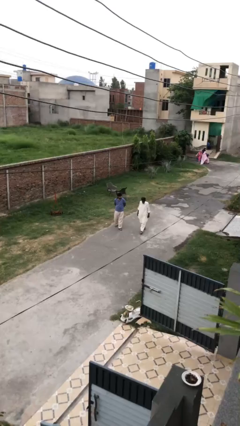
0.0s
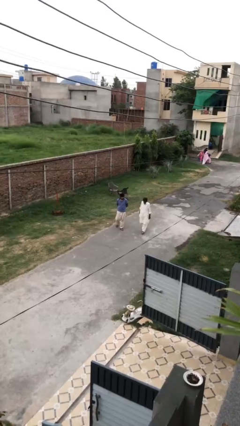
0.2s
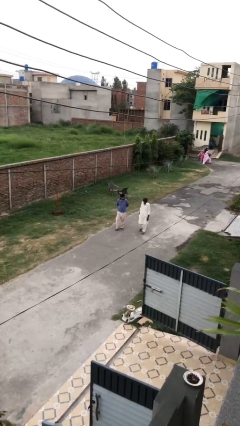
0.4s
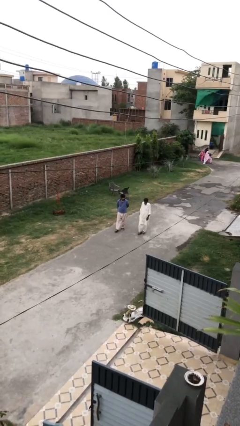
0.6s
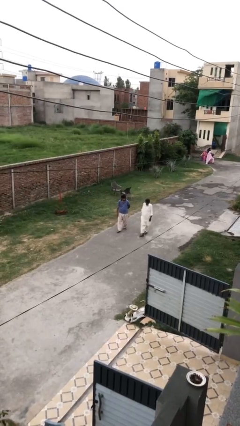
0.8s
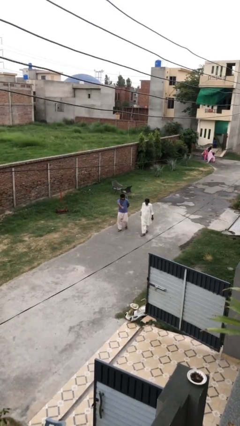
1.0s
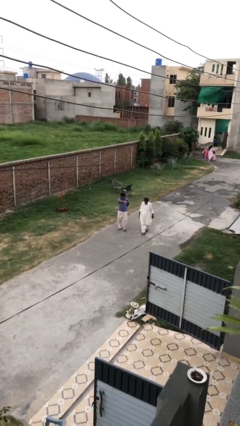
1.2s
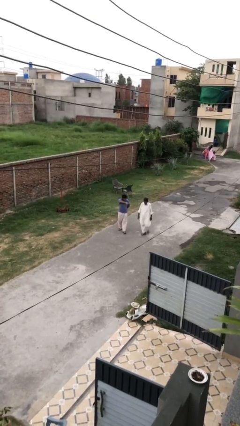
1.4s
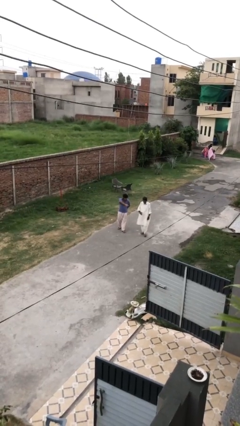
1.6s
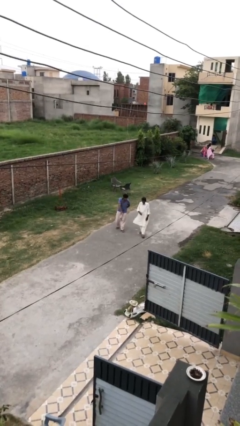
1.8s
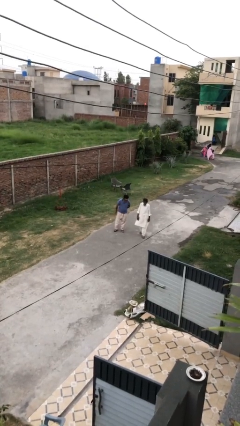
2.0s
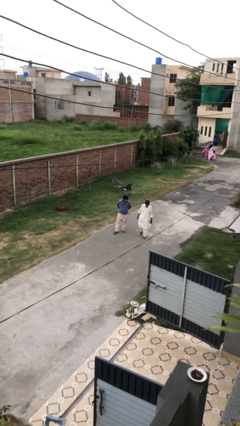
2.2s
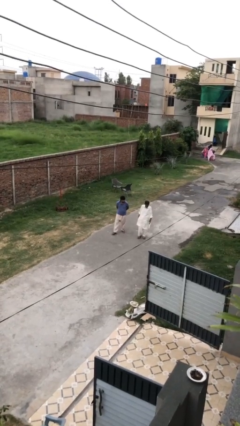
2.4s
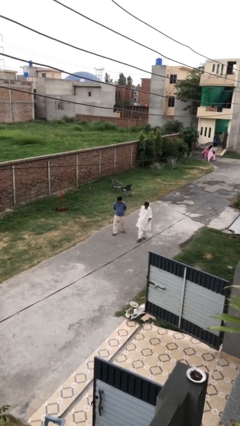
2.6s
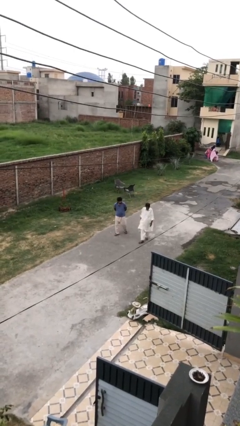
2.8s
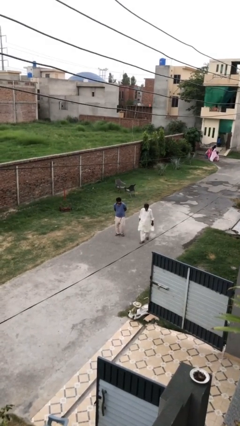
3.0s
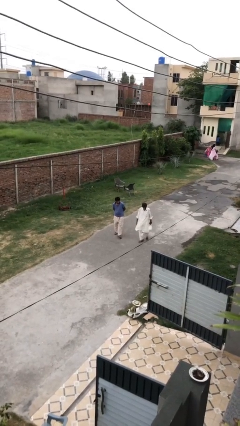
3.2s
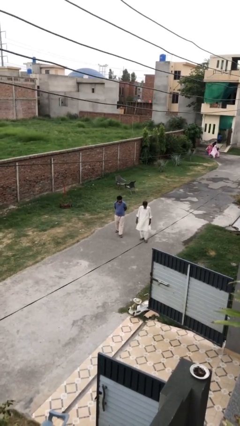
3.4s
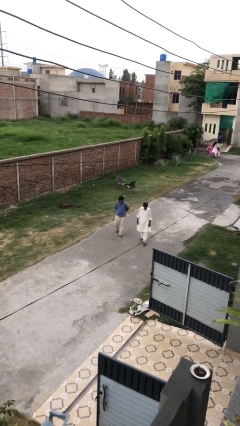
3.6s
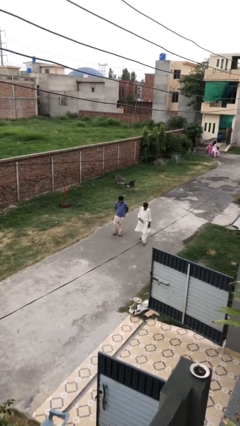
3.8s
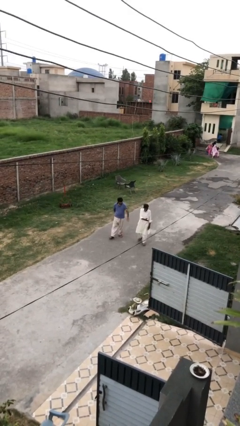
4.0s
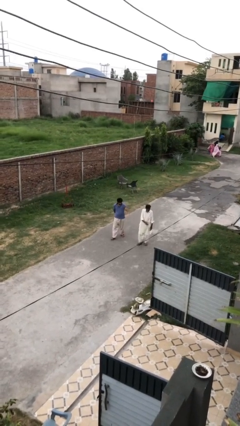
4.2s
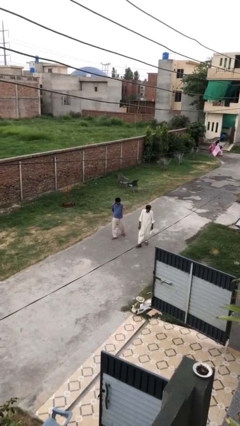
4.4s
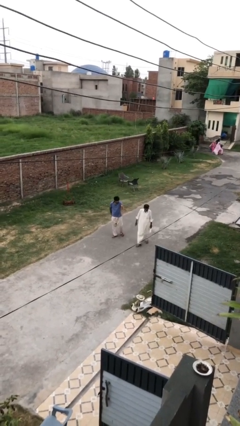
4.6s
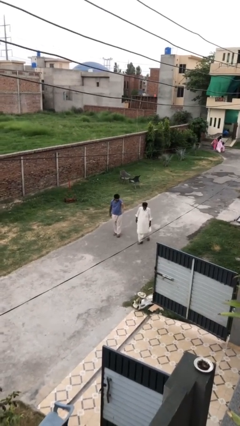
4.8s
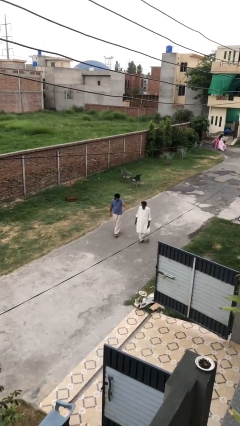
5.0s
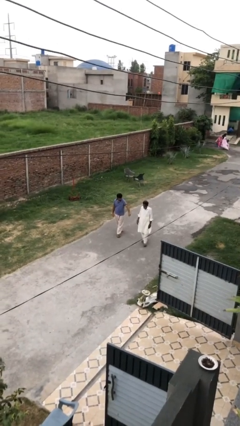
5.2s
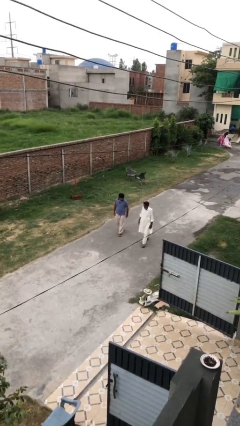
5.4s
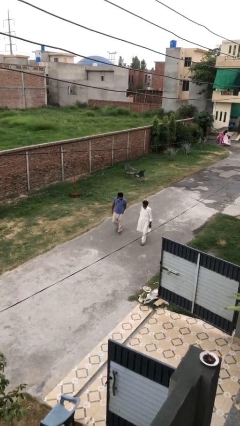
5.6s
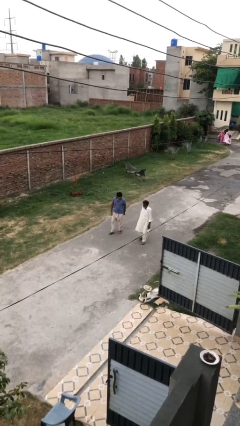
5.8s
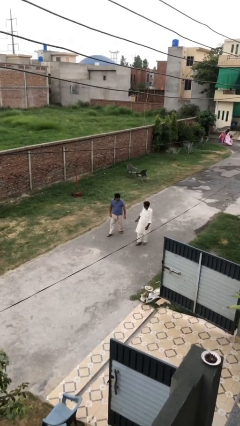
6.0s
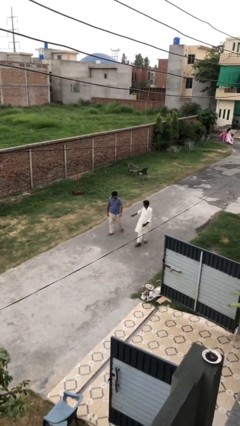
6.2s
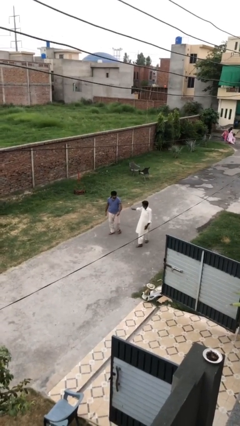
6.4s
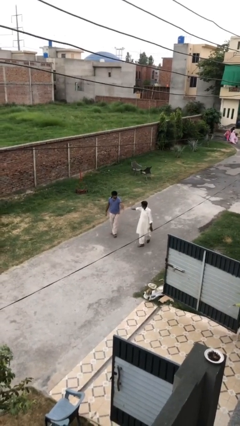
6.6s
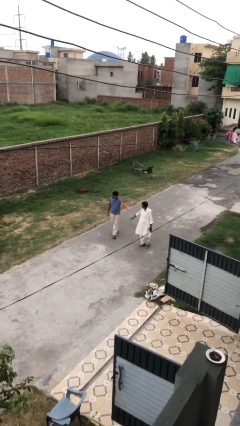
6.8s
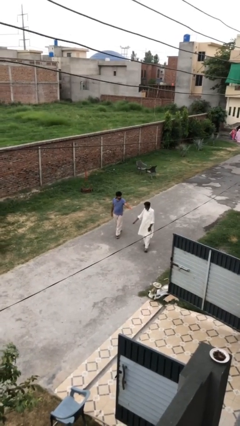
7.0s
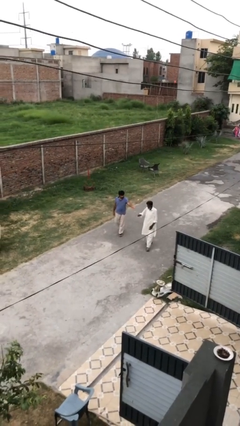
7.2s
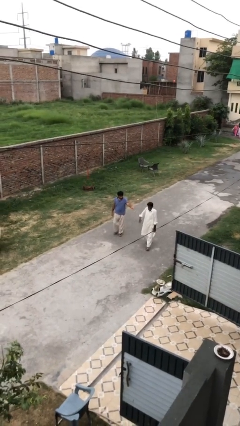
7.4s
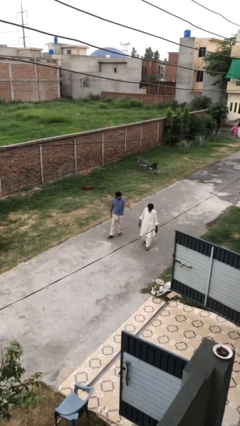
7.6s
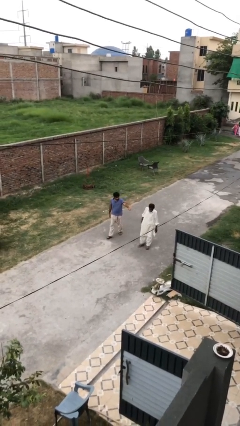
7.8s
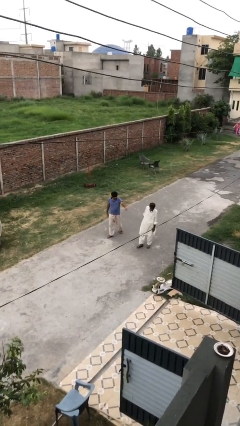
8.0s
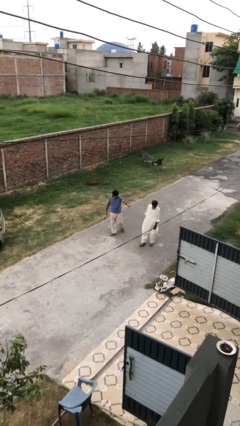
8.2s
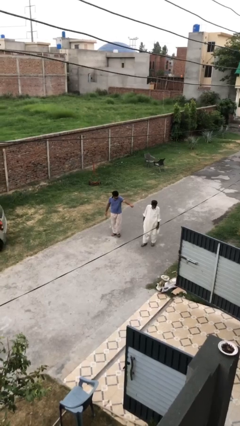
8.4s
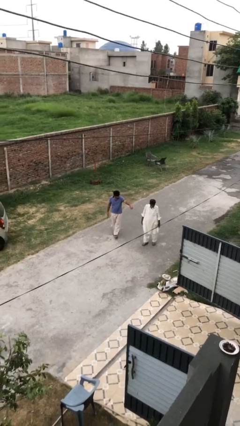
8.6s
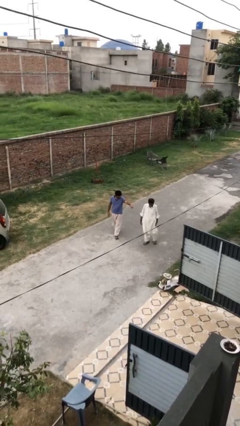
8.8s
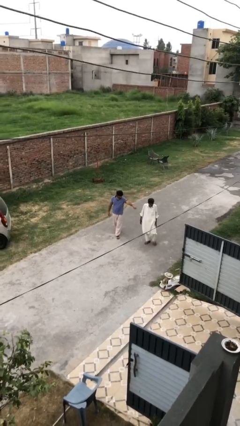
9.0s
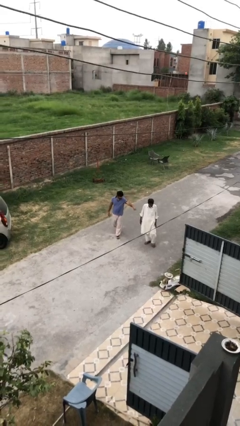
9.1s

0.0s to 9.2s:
person talks to person

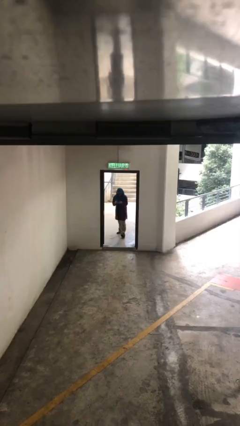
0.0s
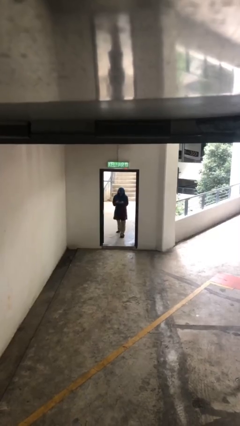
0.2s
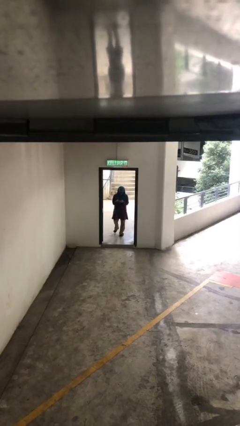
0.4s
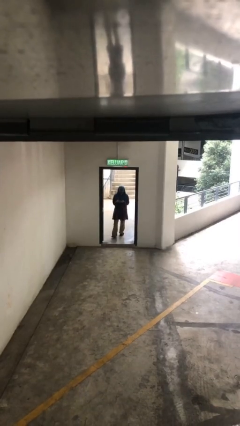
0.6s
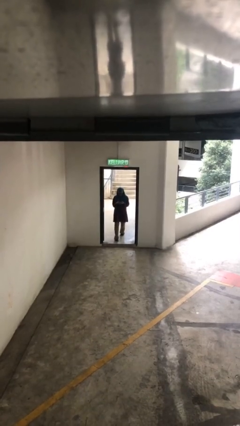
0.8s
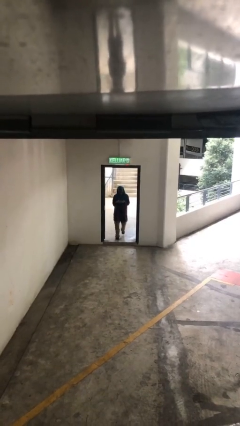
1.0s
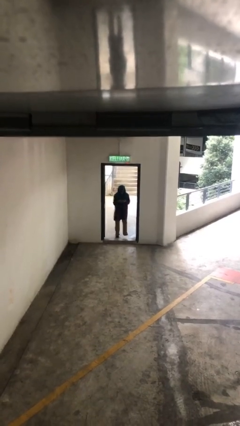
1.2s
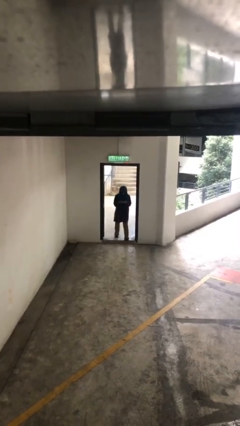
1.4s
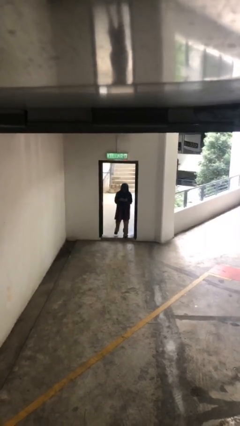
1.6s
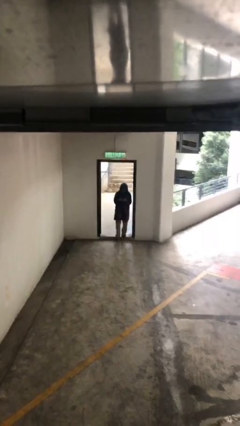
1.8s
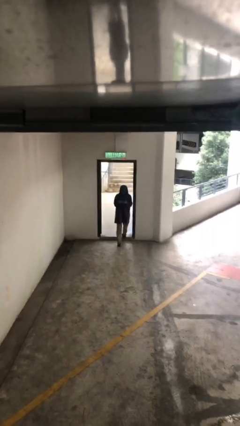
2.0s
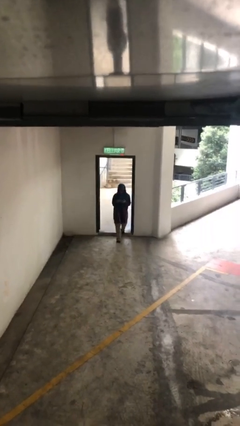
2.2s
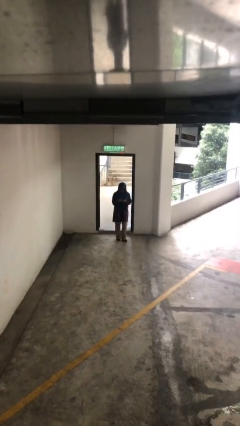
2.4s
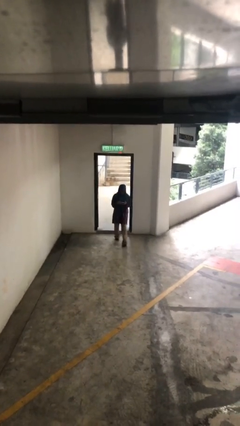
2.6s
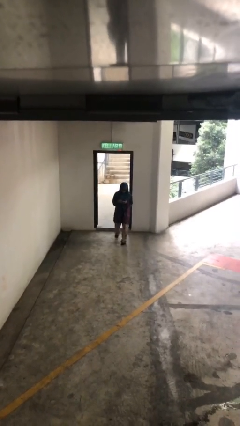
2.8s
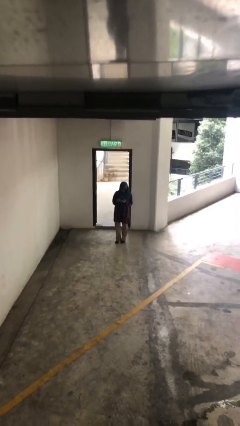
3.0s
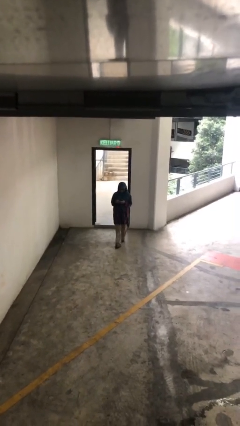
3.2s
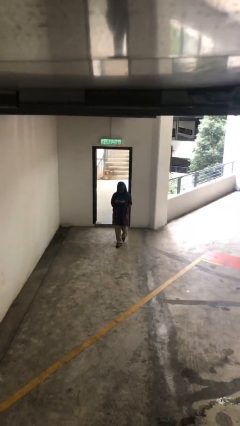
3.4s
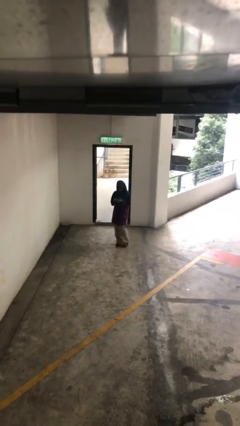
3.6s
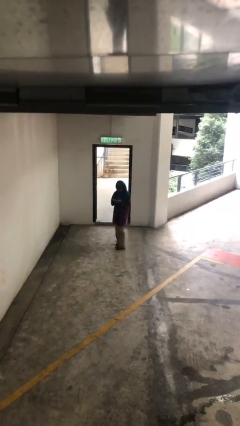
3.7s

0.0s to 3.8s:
person enters scene through structure

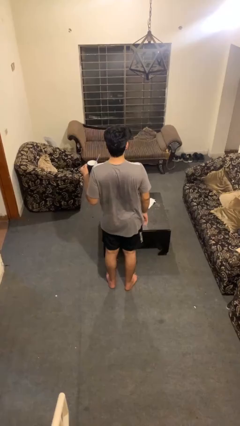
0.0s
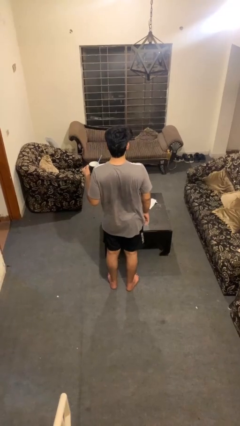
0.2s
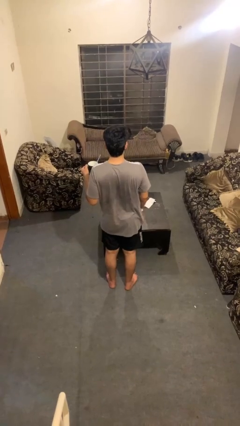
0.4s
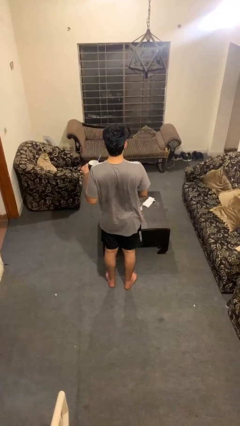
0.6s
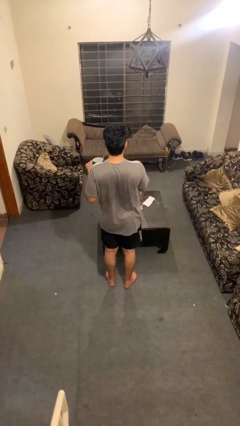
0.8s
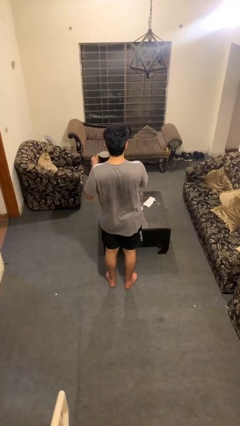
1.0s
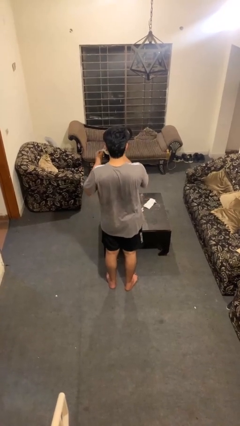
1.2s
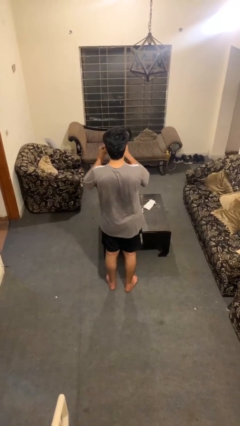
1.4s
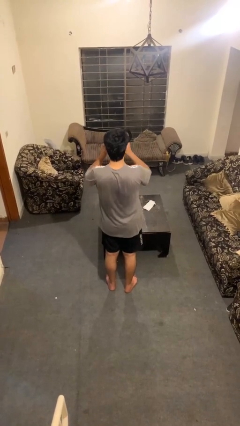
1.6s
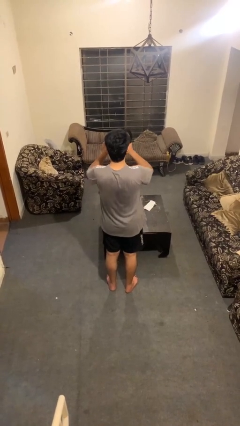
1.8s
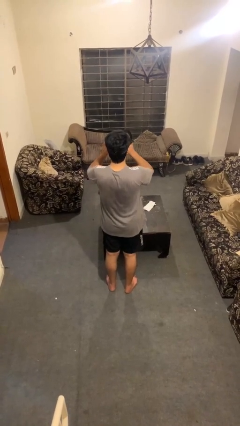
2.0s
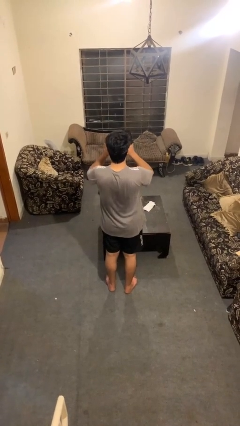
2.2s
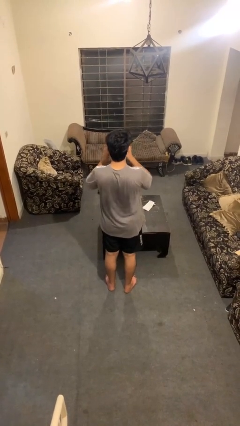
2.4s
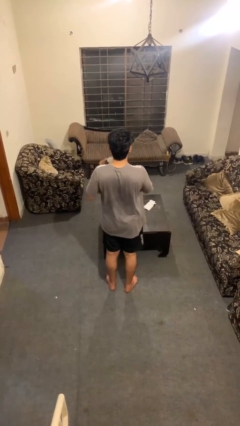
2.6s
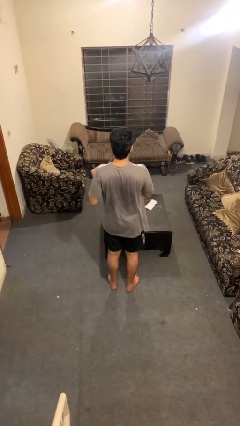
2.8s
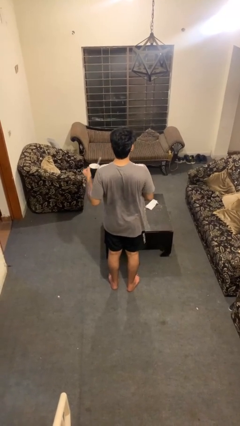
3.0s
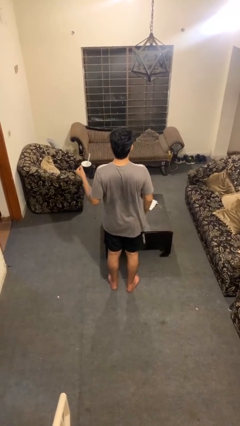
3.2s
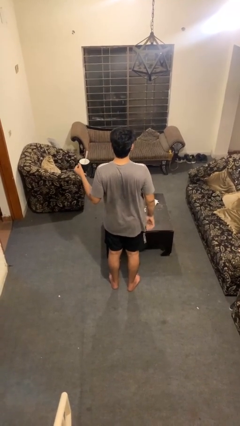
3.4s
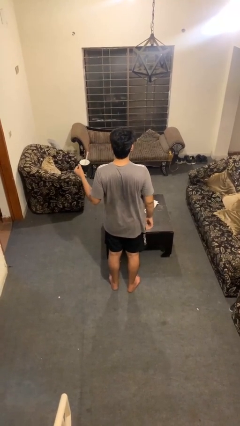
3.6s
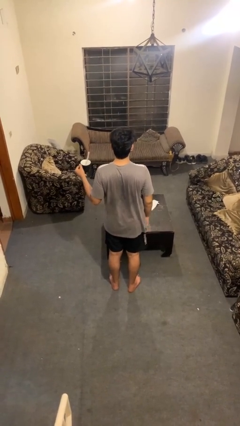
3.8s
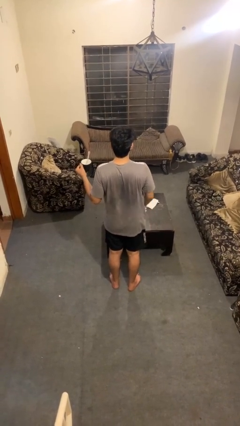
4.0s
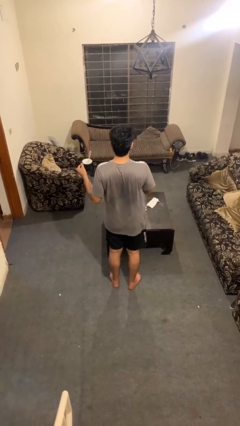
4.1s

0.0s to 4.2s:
person drinks from mug

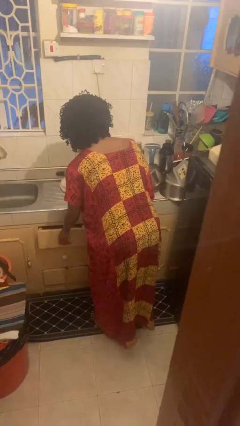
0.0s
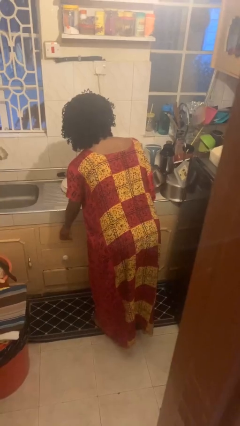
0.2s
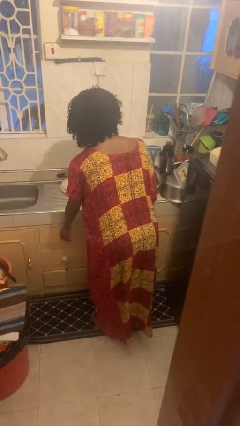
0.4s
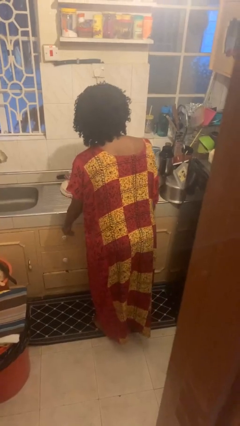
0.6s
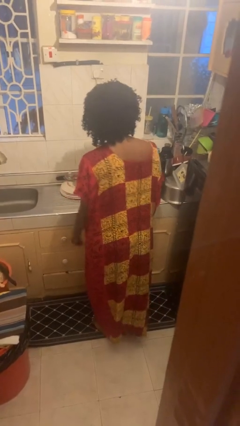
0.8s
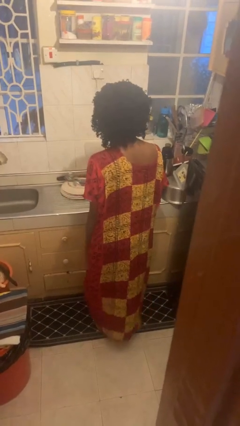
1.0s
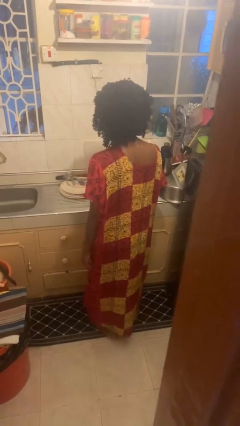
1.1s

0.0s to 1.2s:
person closes kitchen drawer
